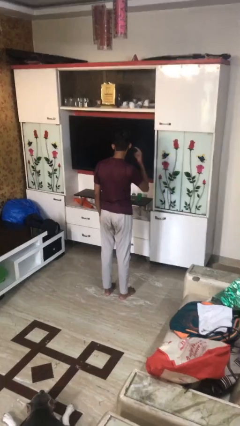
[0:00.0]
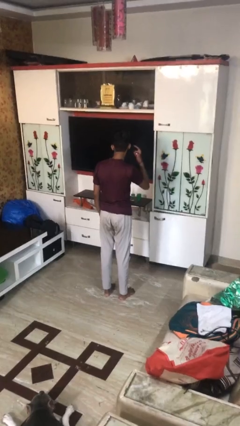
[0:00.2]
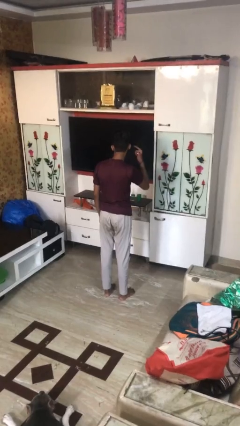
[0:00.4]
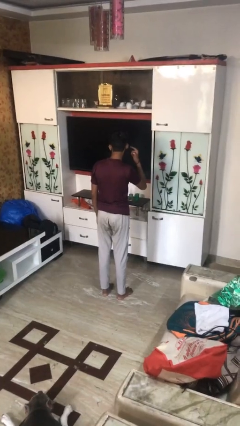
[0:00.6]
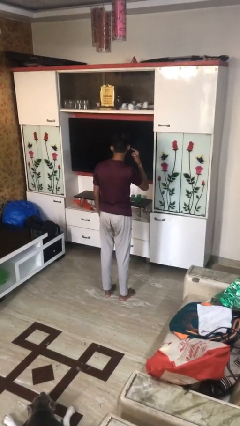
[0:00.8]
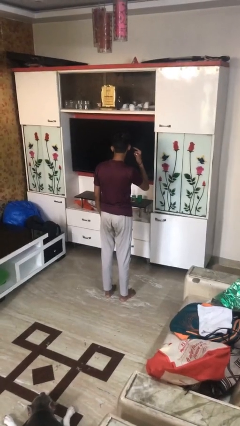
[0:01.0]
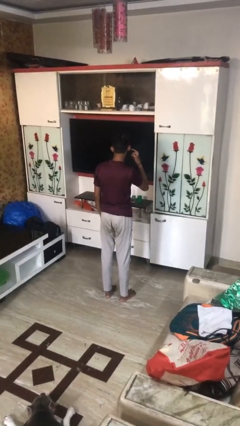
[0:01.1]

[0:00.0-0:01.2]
person gestures listen closely

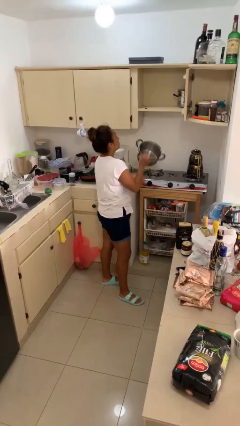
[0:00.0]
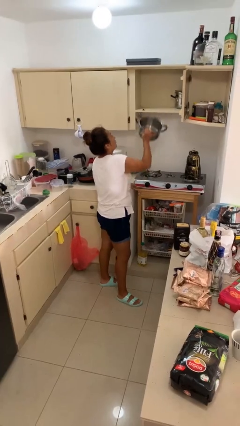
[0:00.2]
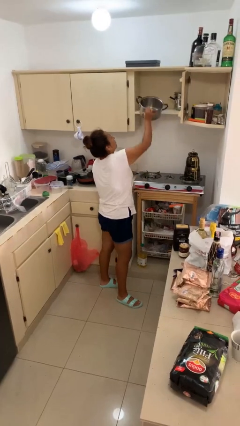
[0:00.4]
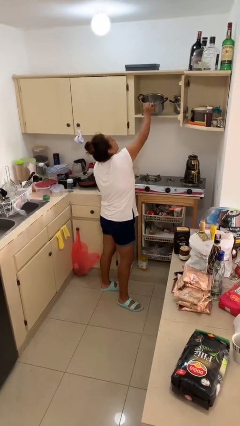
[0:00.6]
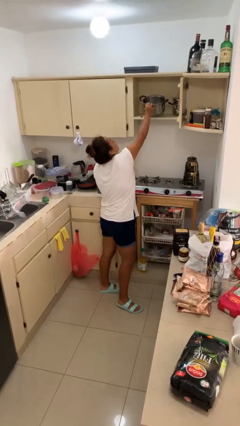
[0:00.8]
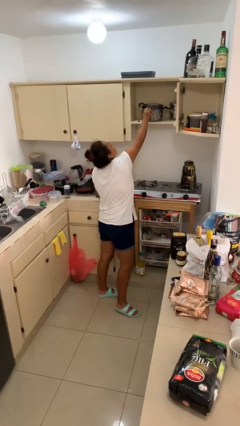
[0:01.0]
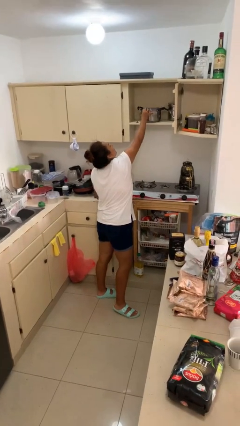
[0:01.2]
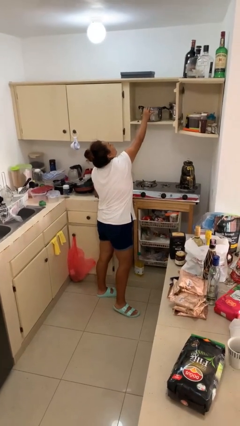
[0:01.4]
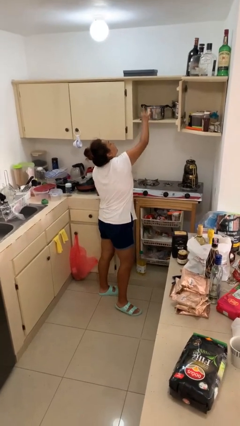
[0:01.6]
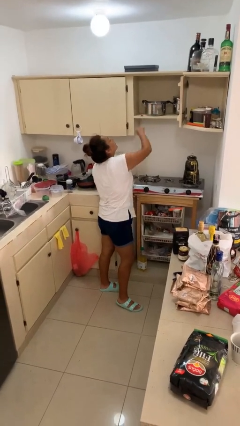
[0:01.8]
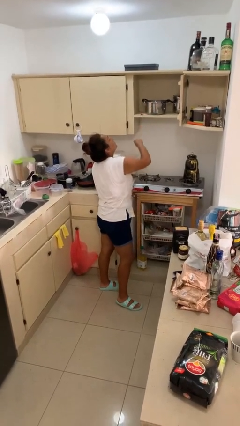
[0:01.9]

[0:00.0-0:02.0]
person puts down object into cabinet

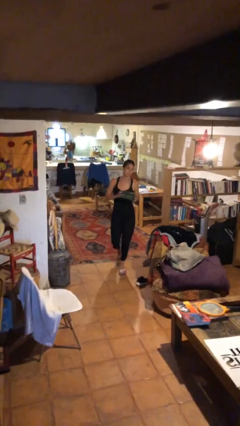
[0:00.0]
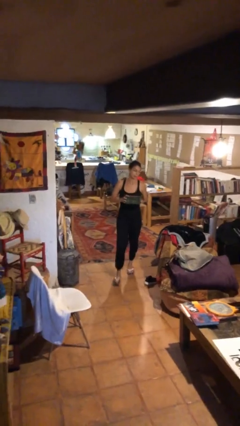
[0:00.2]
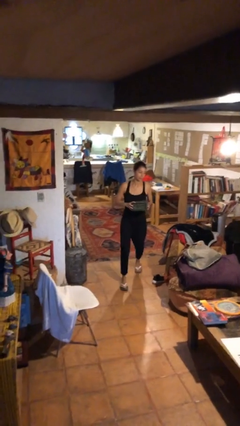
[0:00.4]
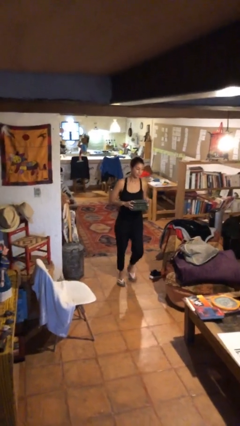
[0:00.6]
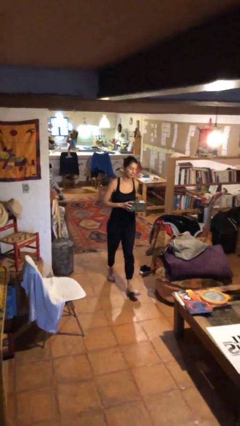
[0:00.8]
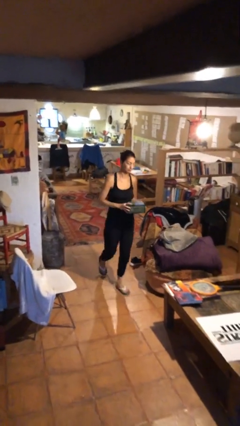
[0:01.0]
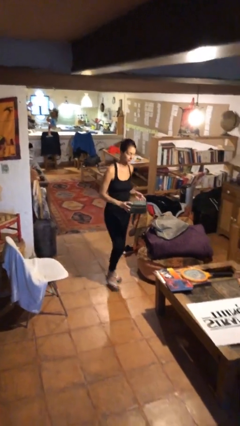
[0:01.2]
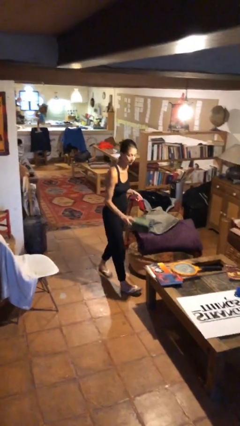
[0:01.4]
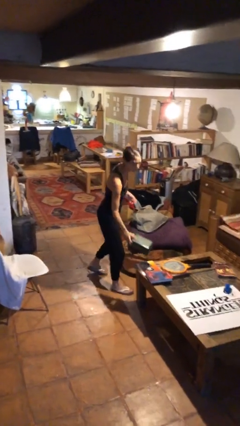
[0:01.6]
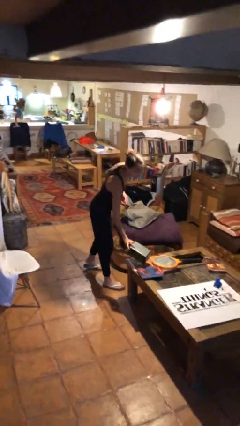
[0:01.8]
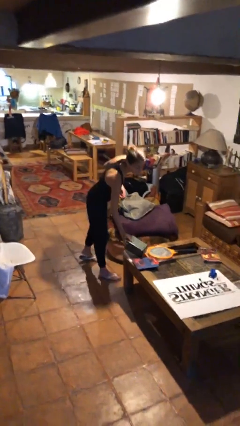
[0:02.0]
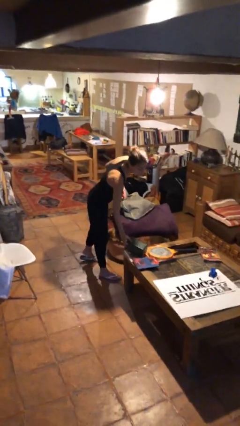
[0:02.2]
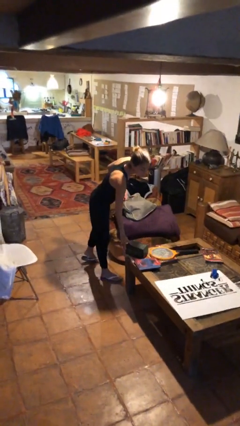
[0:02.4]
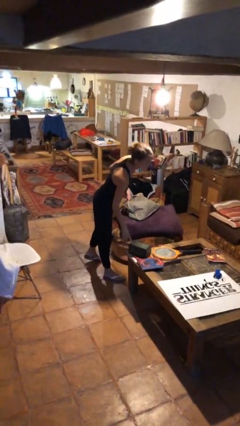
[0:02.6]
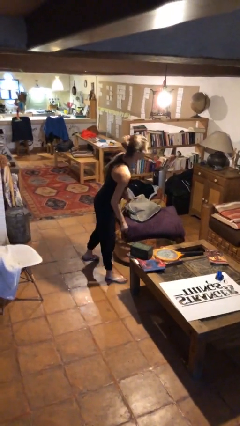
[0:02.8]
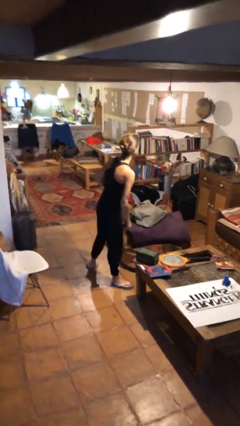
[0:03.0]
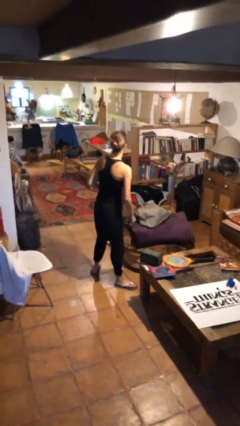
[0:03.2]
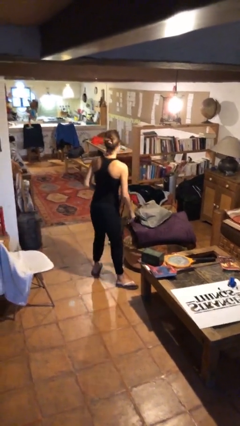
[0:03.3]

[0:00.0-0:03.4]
person puts down object on table

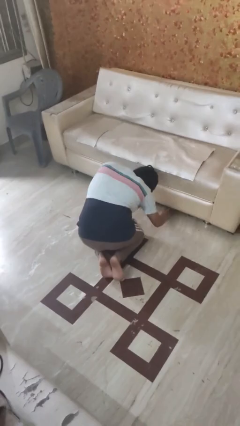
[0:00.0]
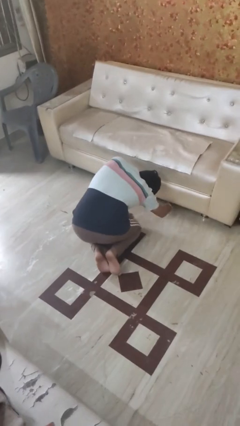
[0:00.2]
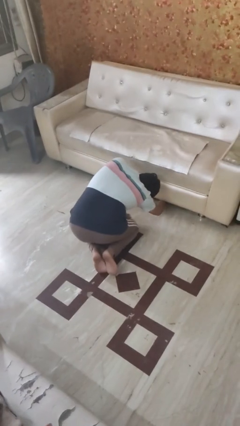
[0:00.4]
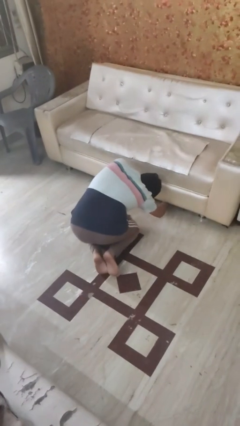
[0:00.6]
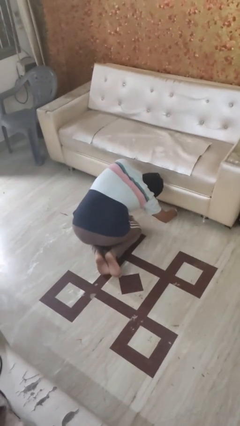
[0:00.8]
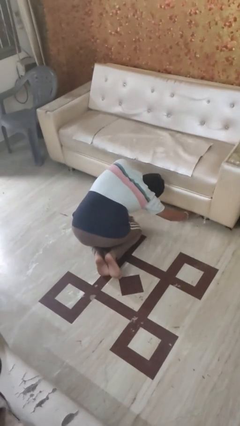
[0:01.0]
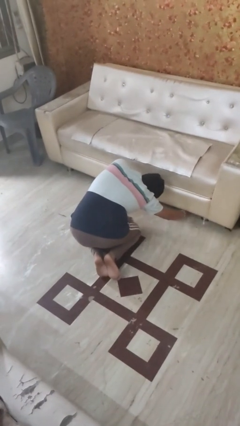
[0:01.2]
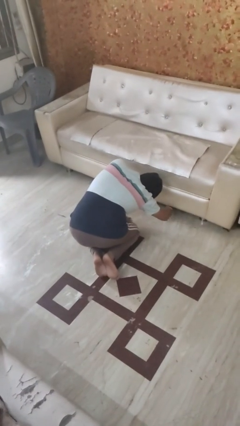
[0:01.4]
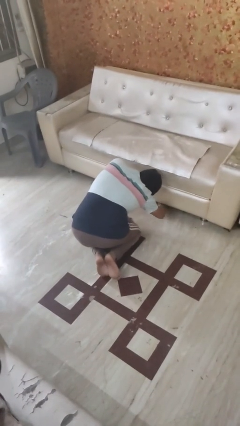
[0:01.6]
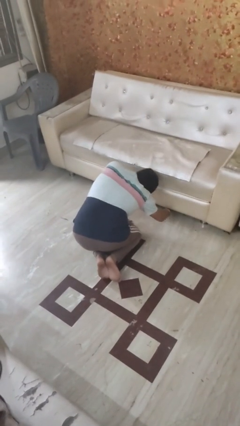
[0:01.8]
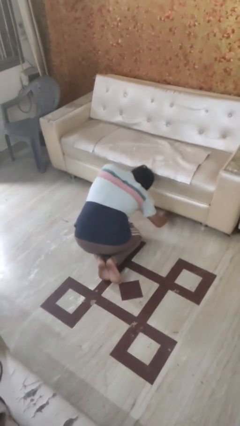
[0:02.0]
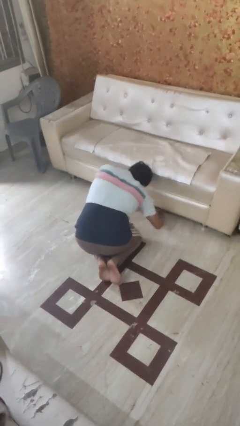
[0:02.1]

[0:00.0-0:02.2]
person searches under bed

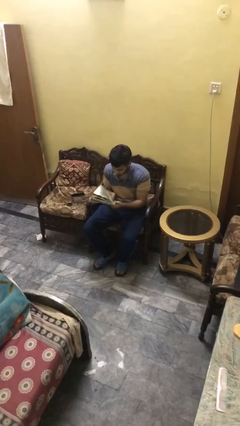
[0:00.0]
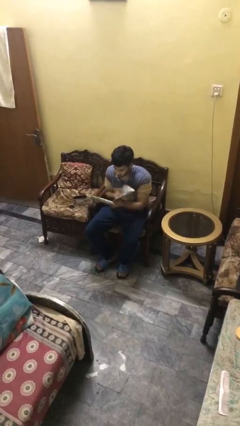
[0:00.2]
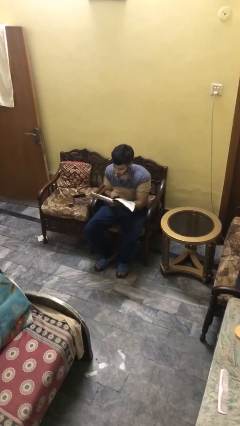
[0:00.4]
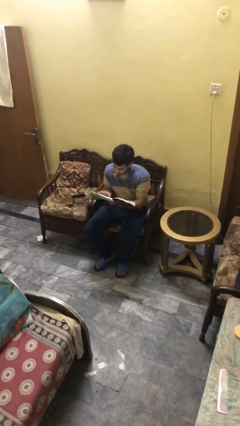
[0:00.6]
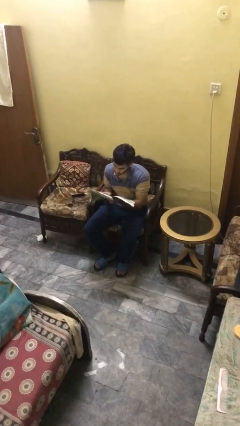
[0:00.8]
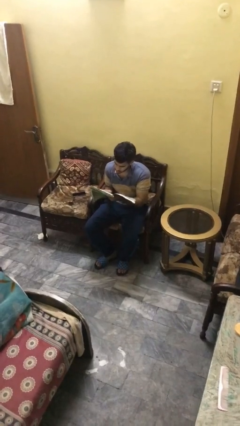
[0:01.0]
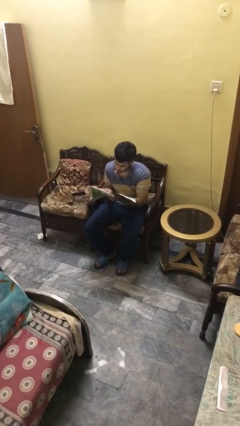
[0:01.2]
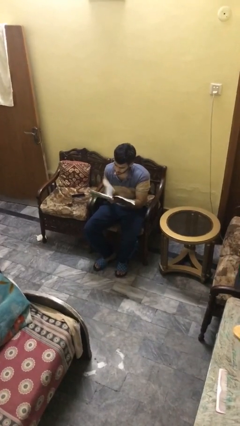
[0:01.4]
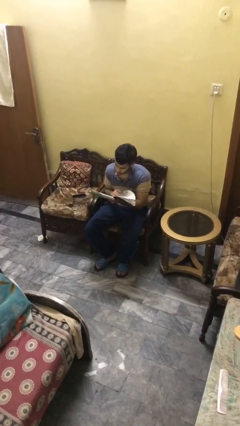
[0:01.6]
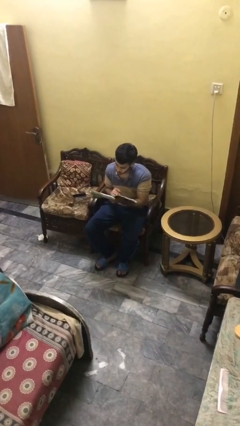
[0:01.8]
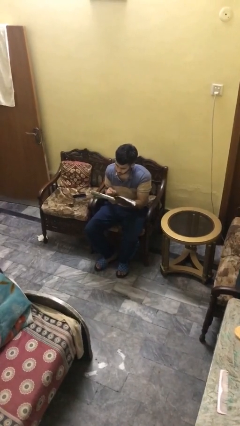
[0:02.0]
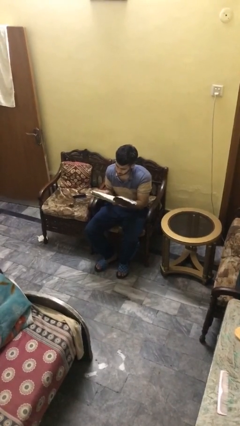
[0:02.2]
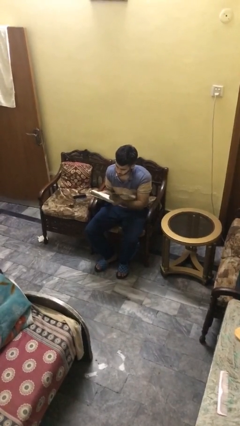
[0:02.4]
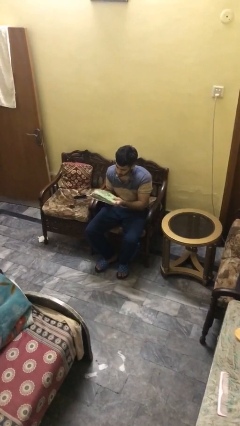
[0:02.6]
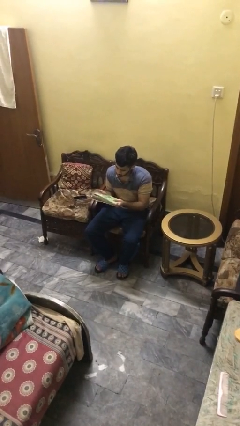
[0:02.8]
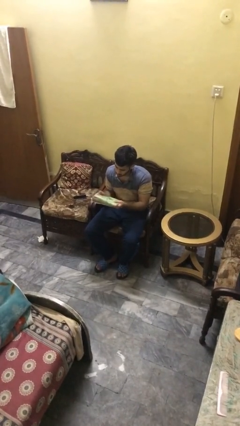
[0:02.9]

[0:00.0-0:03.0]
person reads document

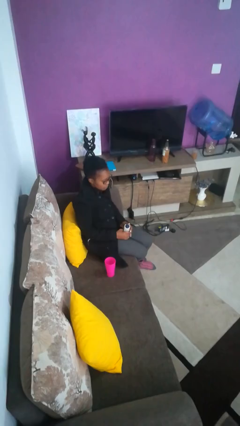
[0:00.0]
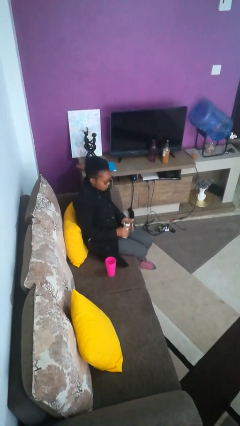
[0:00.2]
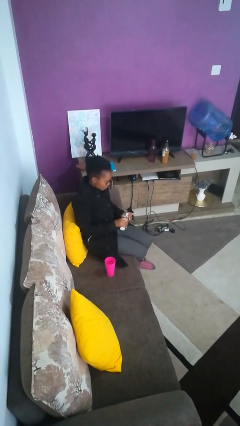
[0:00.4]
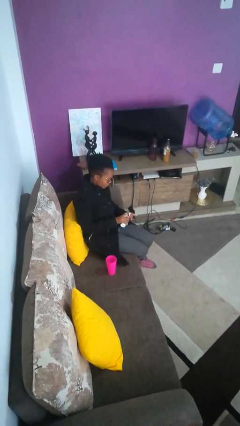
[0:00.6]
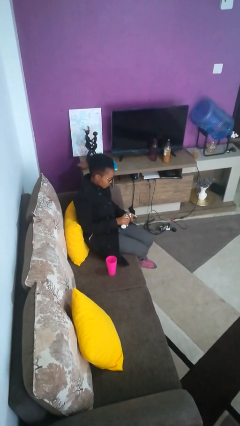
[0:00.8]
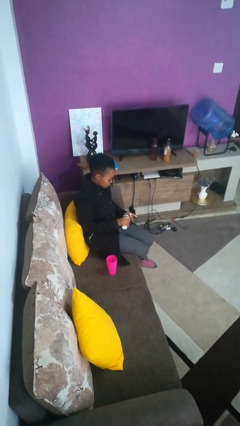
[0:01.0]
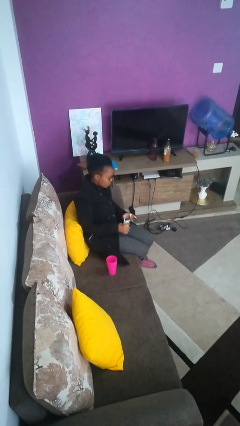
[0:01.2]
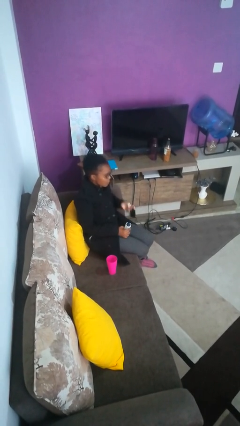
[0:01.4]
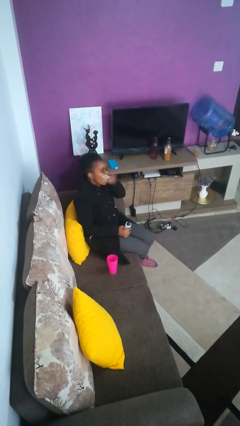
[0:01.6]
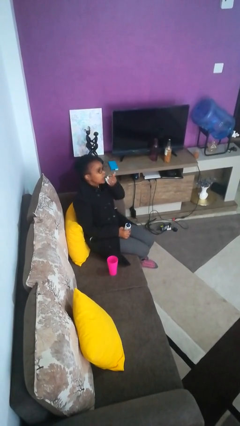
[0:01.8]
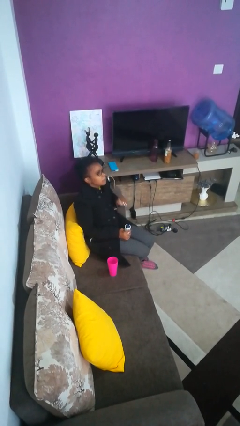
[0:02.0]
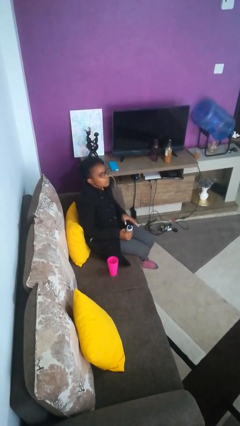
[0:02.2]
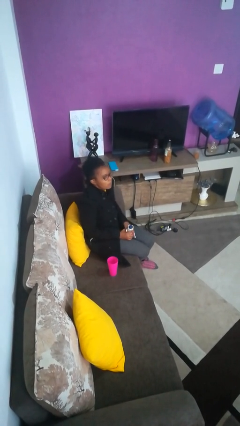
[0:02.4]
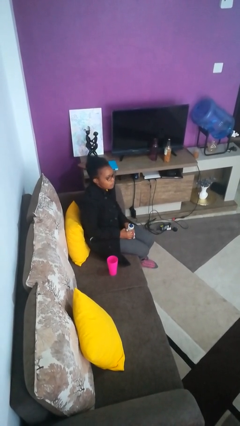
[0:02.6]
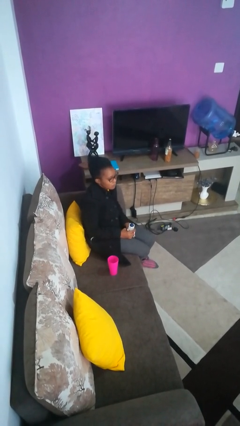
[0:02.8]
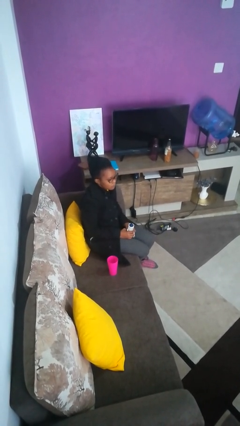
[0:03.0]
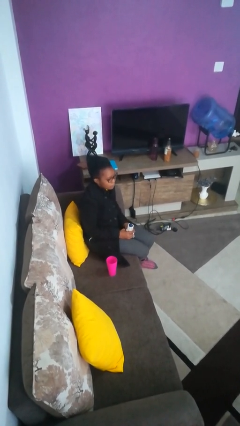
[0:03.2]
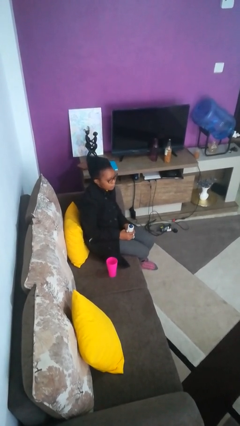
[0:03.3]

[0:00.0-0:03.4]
person takes medicine pills

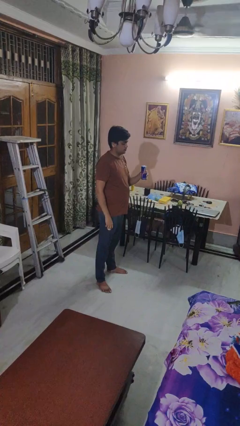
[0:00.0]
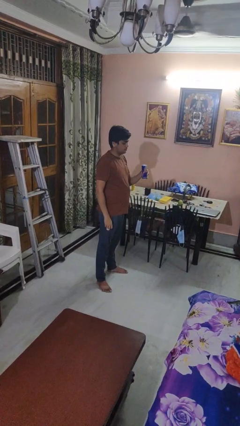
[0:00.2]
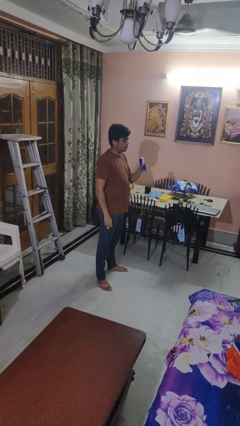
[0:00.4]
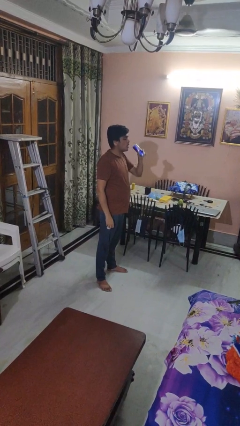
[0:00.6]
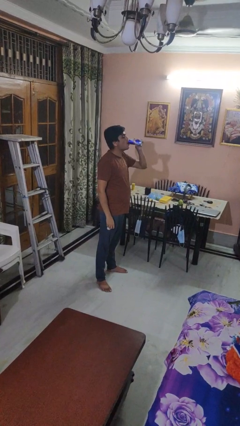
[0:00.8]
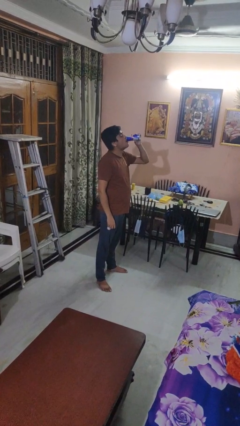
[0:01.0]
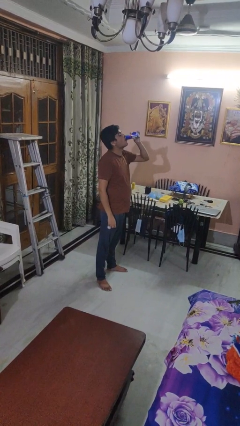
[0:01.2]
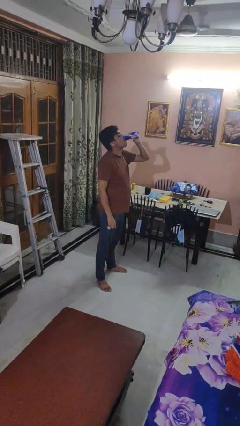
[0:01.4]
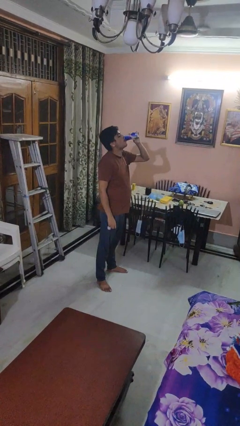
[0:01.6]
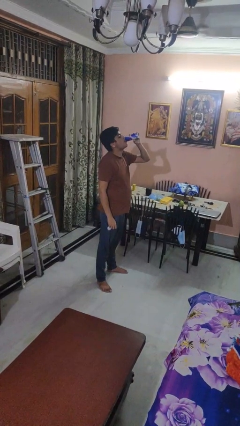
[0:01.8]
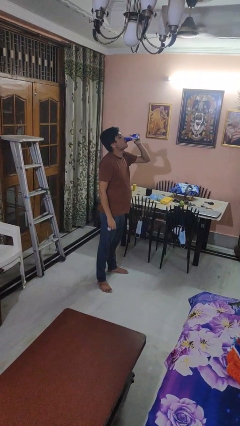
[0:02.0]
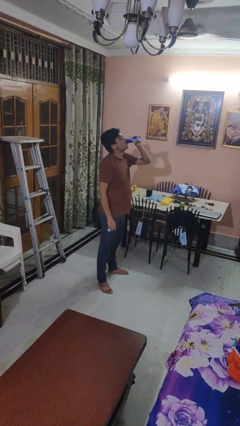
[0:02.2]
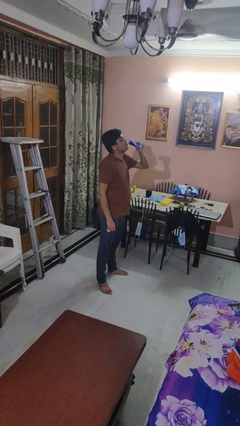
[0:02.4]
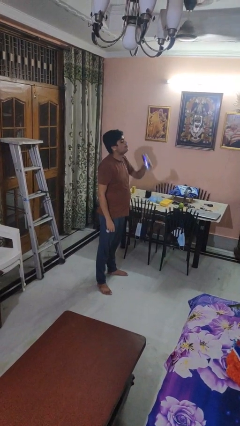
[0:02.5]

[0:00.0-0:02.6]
person drinks from beverage can
